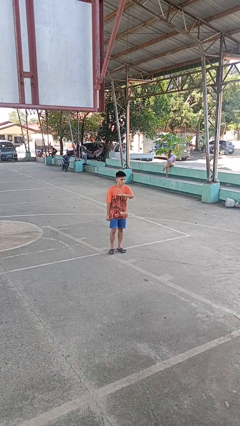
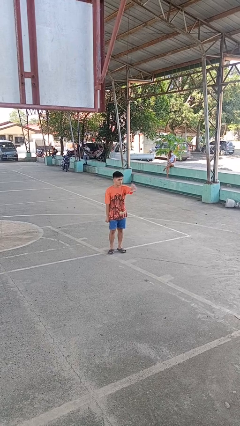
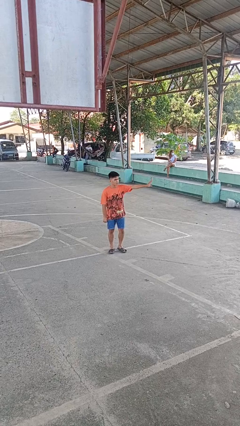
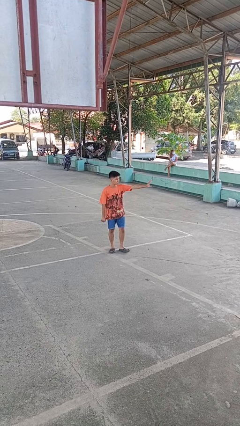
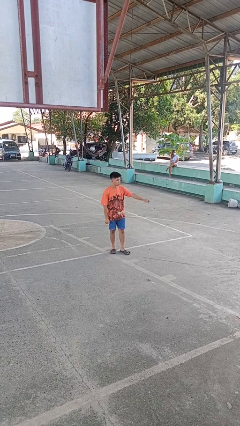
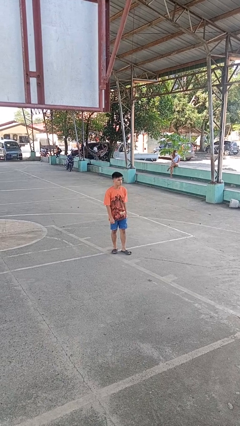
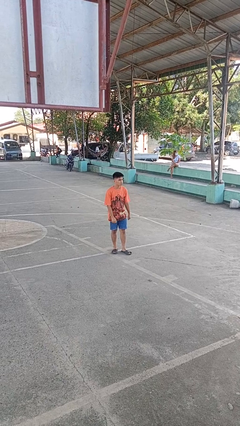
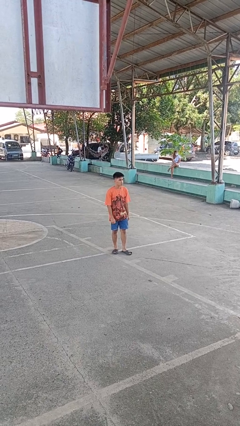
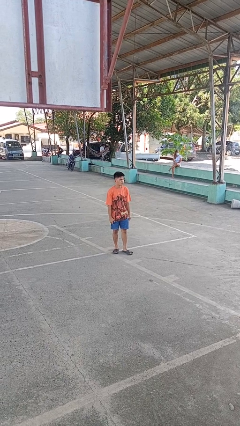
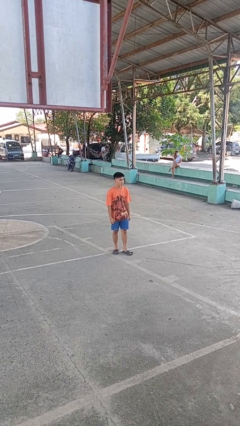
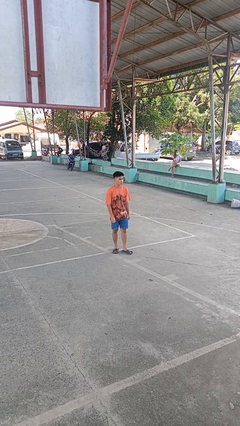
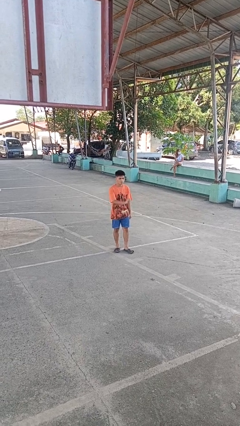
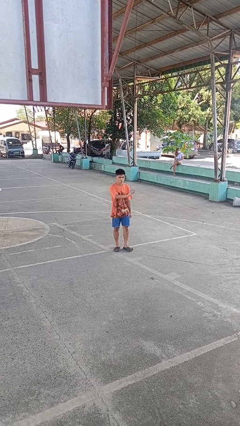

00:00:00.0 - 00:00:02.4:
person gestures swipe left

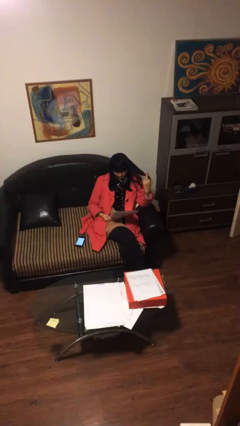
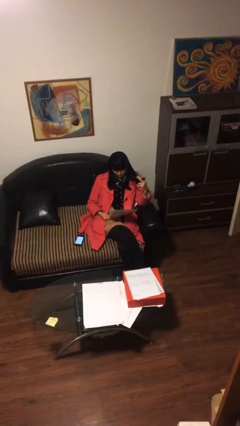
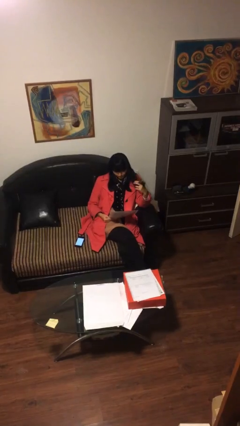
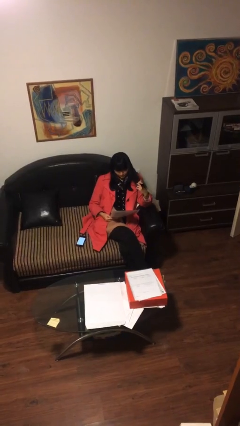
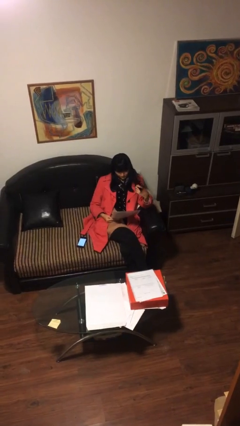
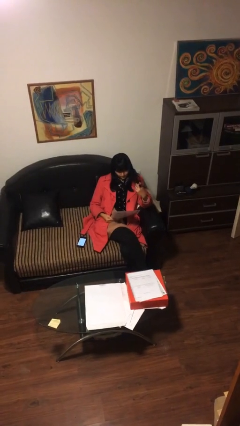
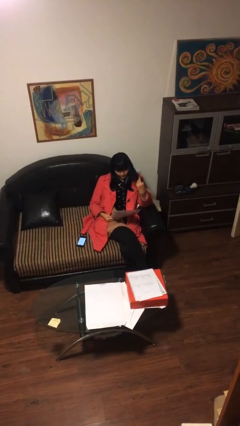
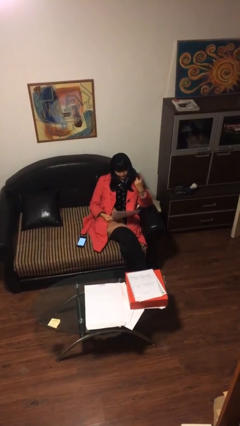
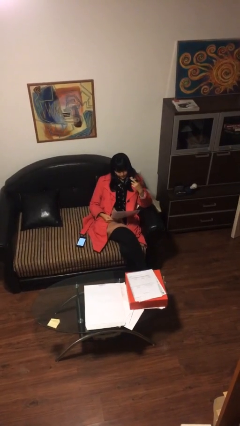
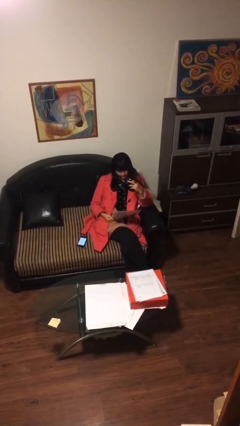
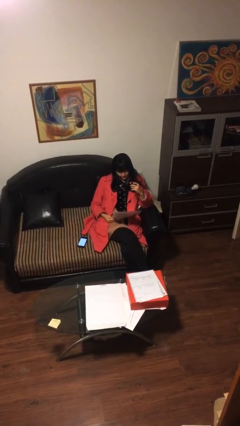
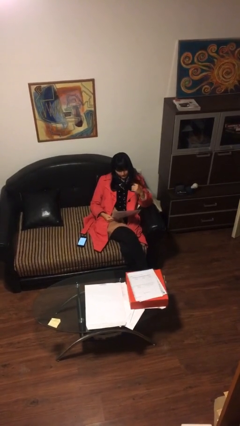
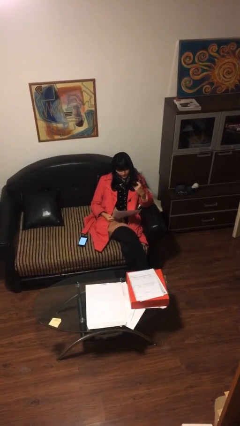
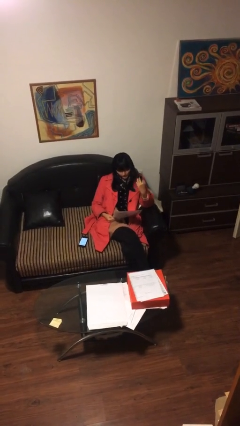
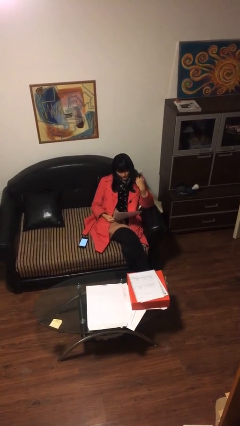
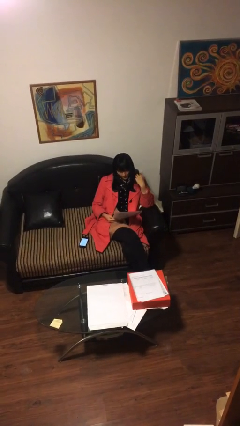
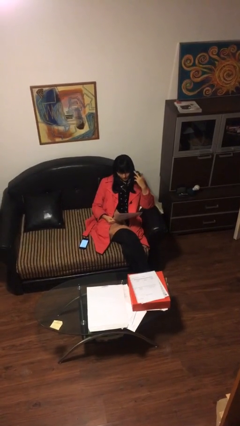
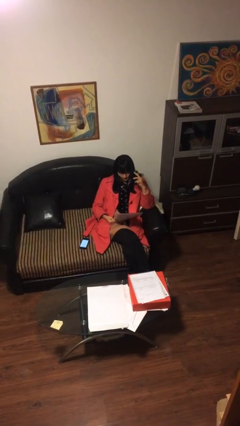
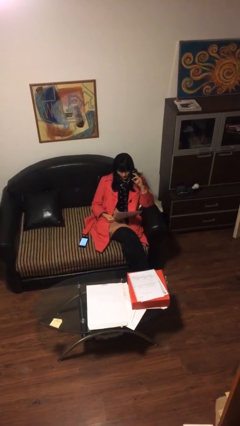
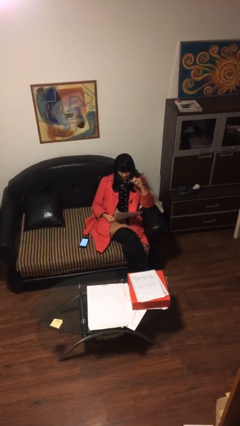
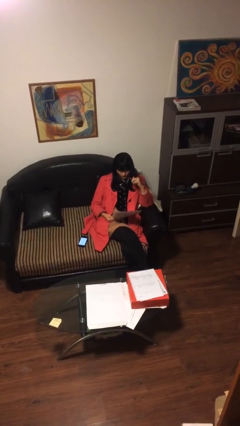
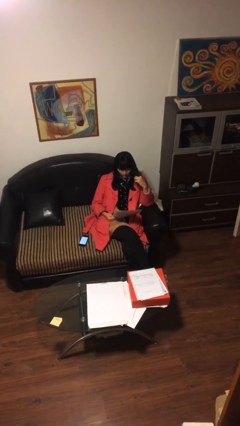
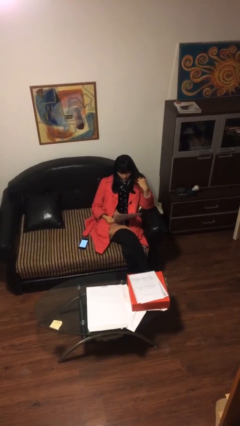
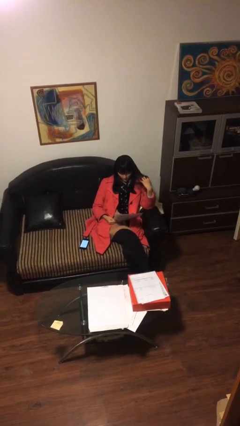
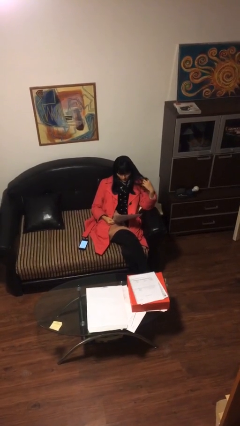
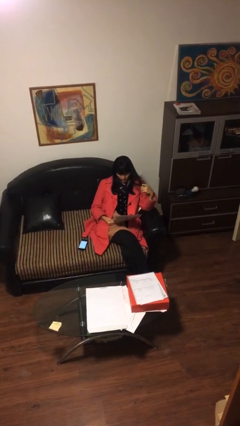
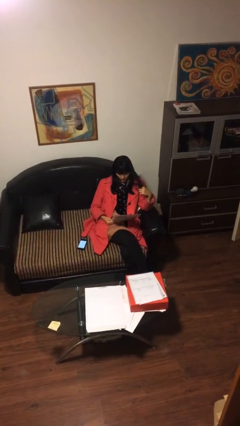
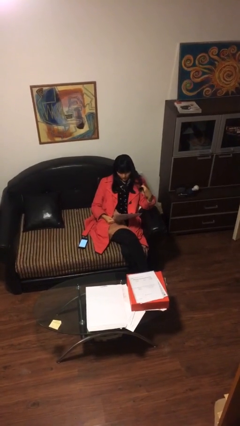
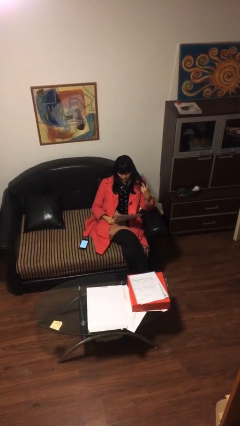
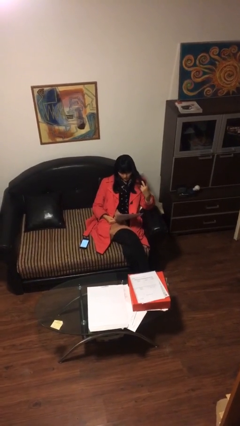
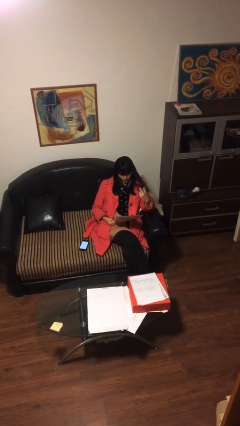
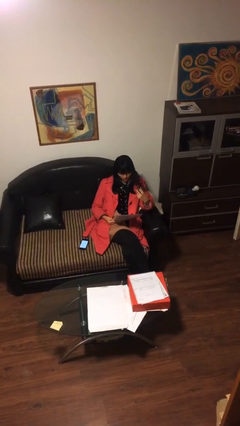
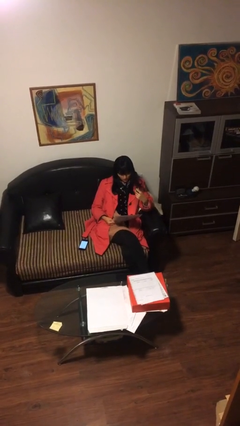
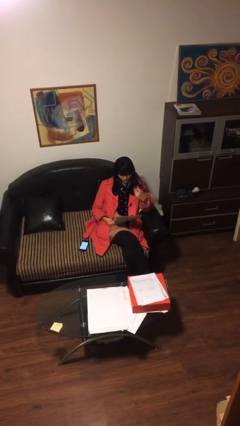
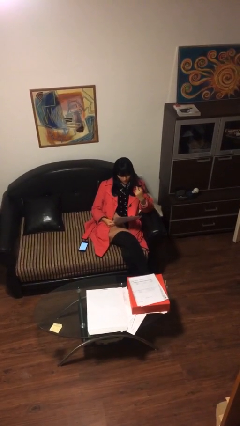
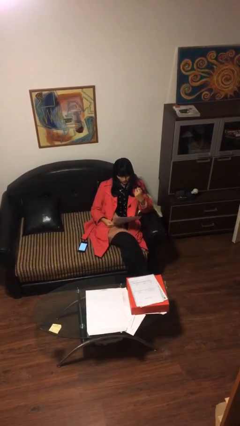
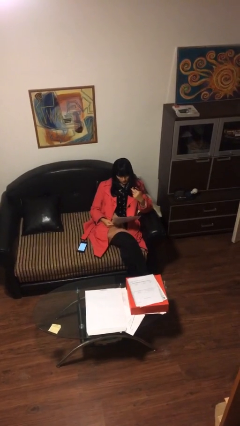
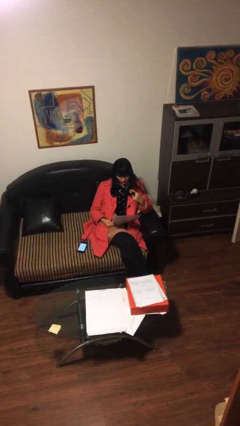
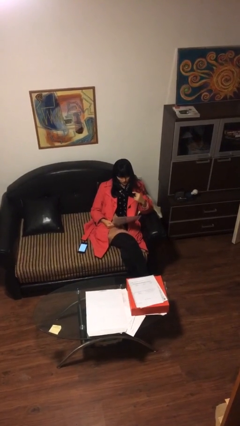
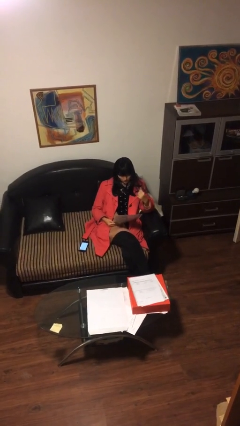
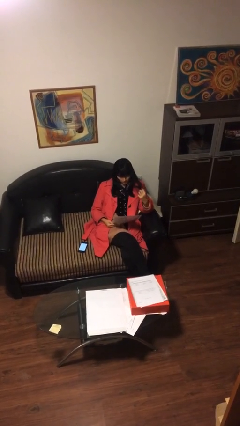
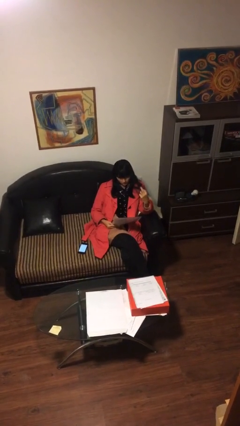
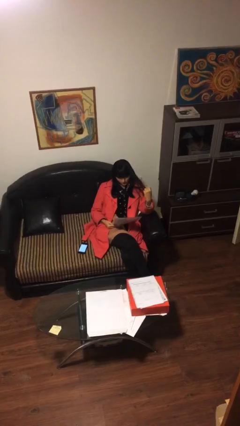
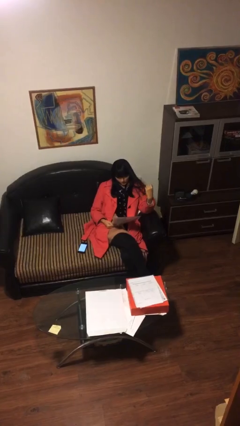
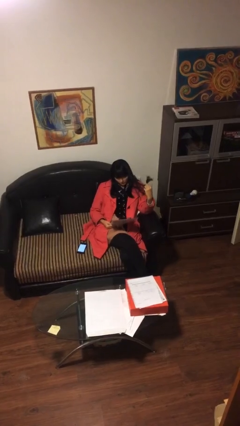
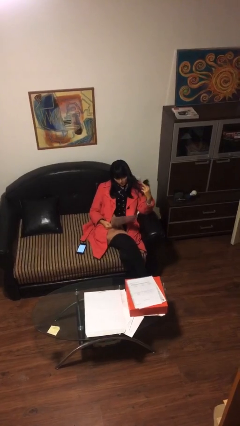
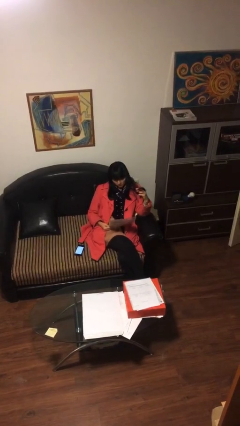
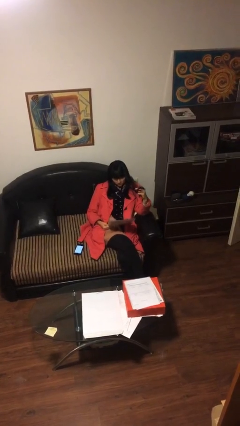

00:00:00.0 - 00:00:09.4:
person reads document

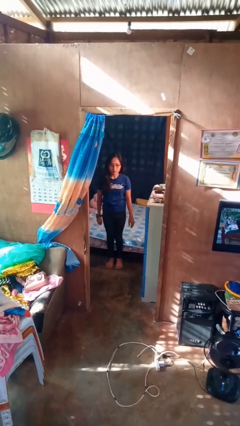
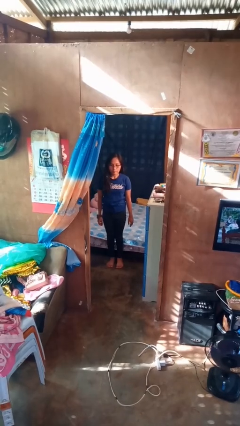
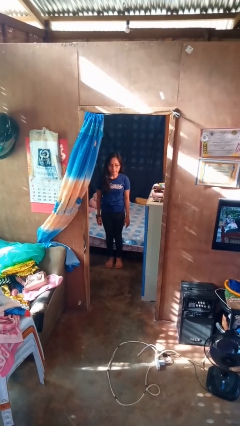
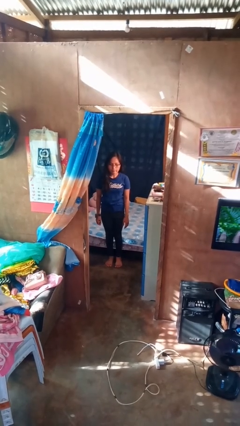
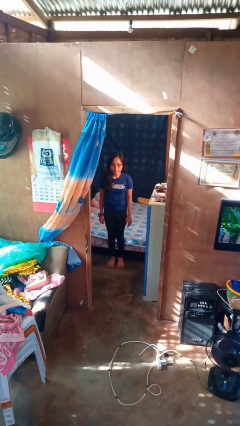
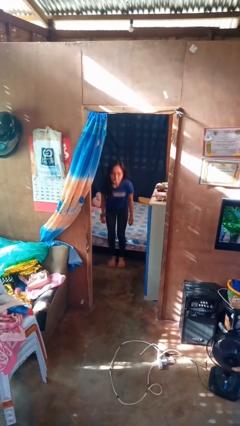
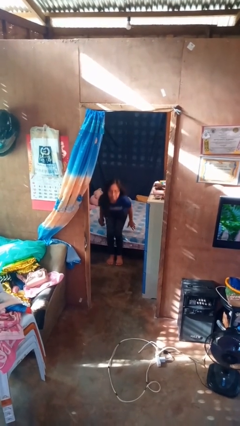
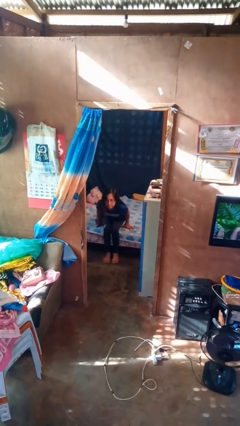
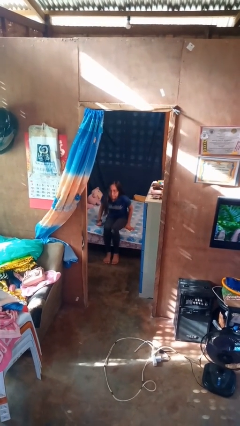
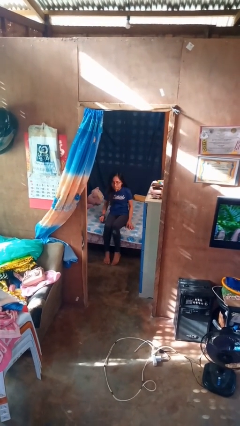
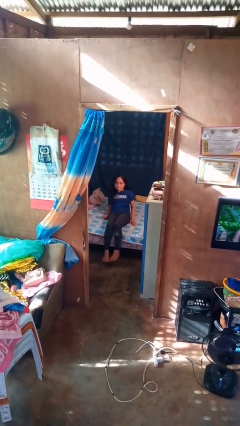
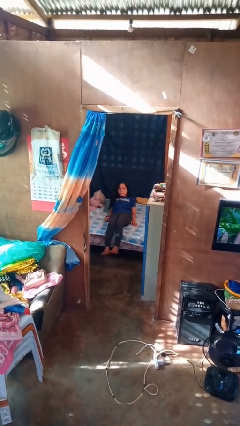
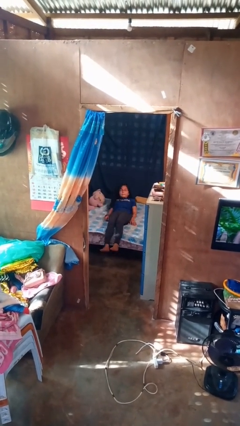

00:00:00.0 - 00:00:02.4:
person lies down on bed

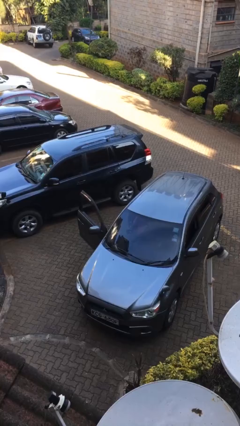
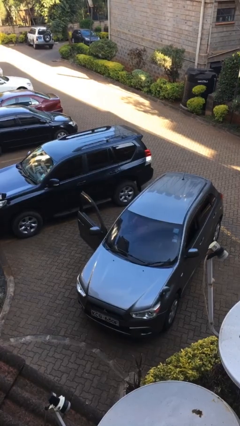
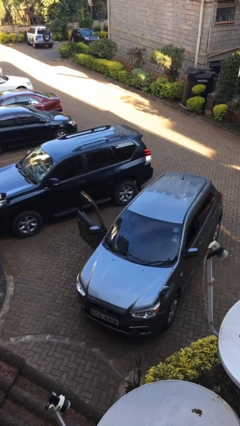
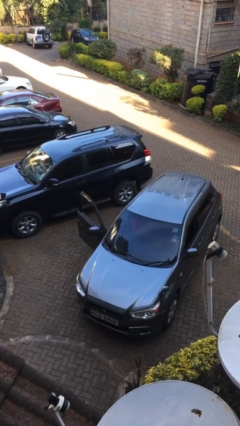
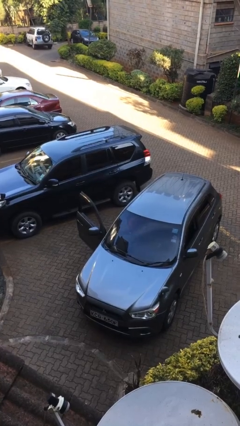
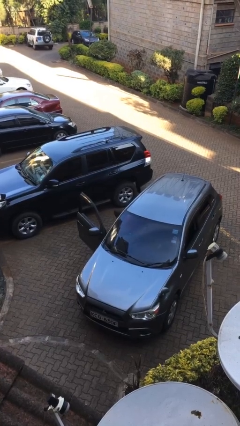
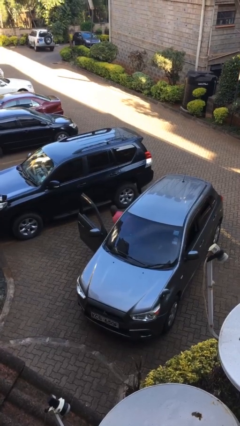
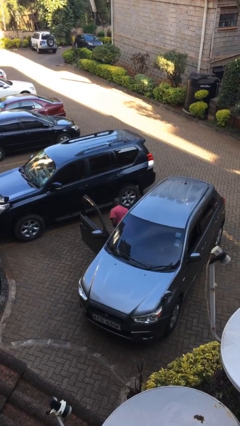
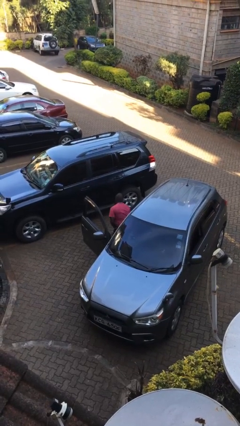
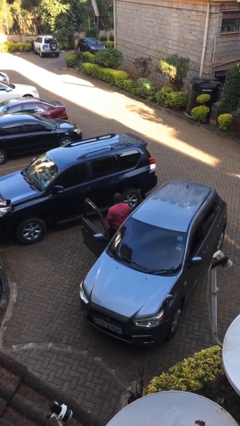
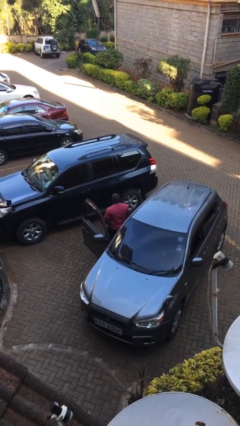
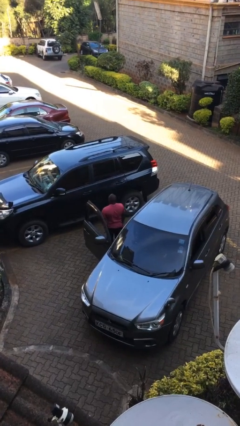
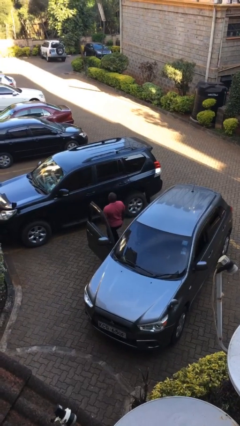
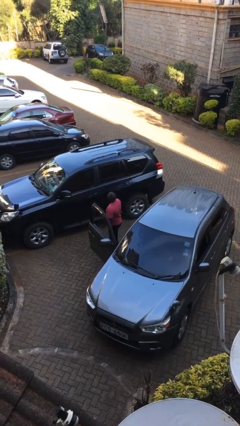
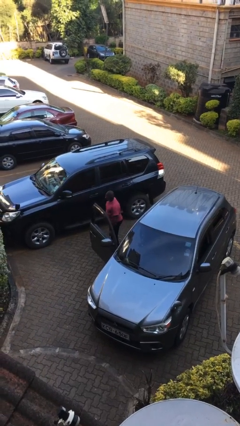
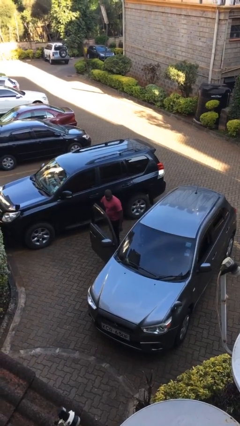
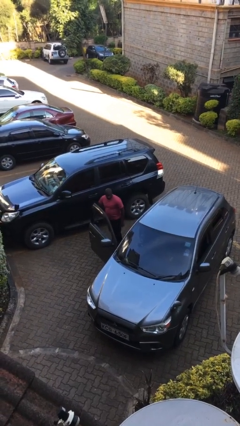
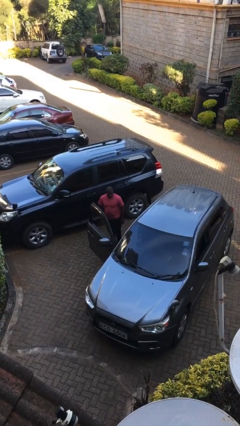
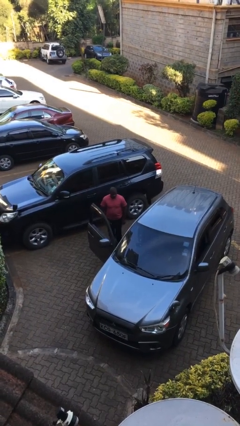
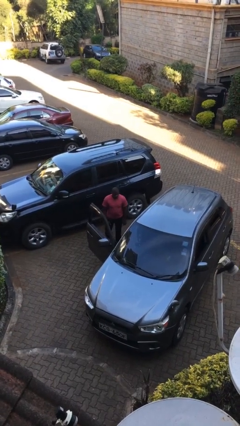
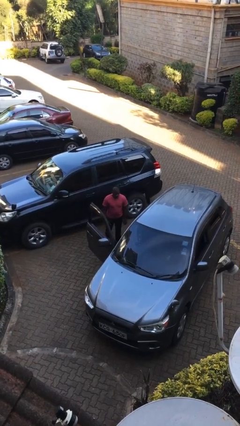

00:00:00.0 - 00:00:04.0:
person exits car
